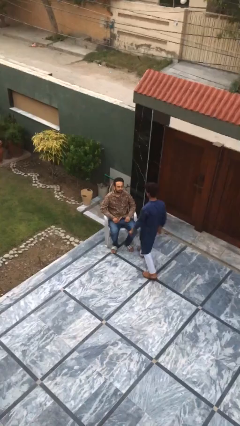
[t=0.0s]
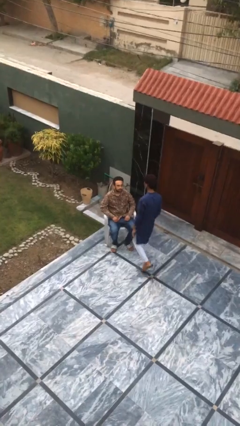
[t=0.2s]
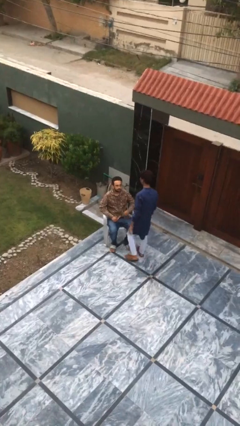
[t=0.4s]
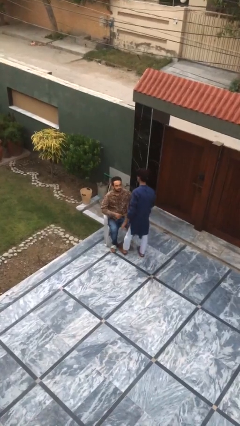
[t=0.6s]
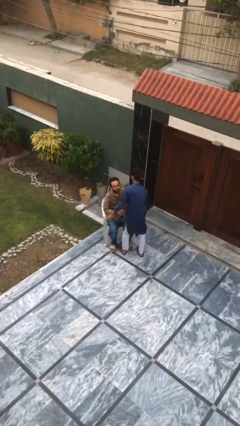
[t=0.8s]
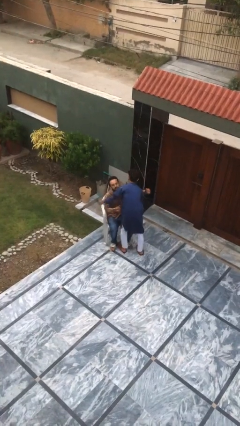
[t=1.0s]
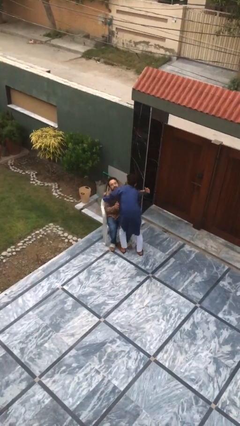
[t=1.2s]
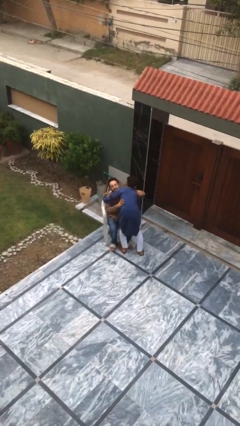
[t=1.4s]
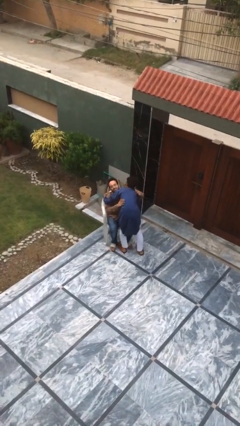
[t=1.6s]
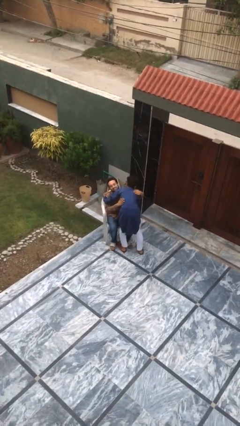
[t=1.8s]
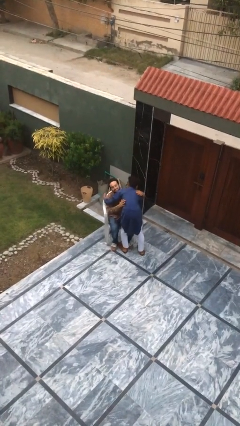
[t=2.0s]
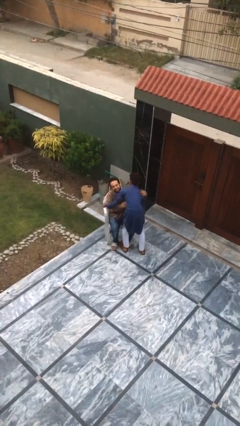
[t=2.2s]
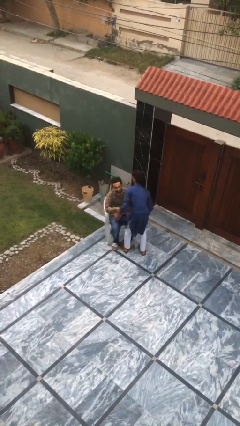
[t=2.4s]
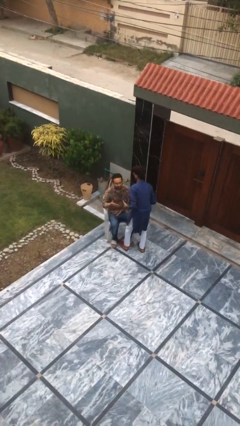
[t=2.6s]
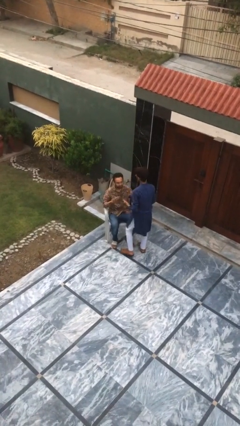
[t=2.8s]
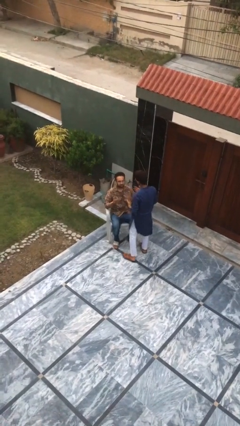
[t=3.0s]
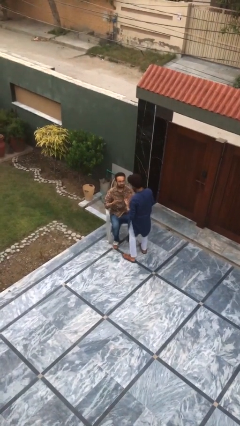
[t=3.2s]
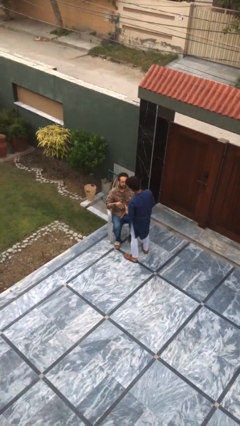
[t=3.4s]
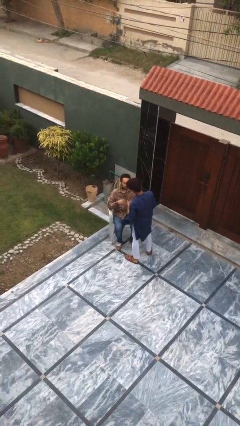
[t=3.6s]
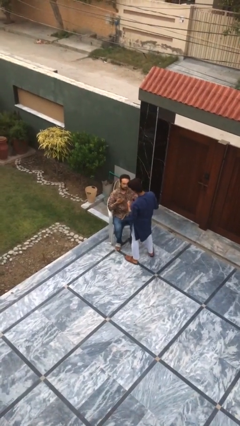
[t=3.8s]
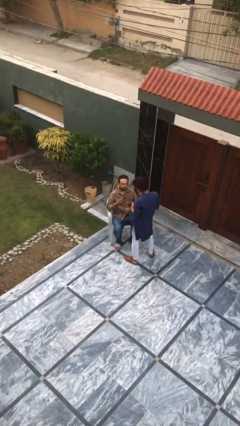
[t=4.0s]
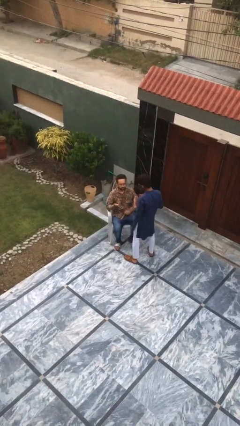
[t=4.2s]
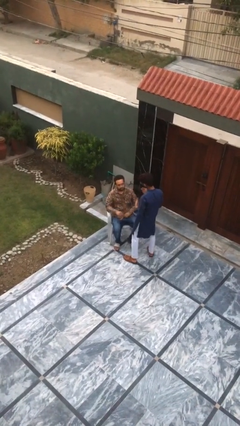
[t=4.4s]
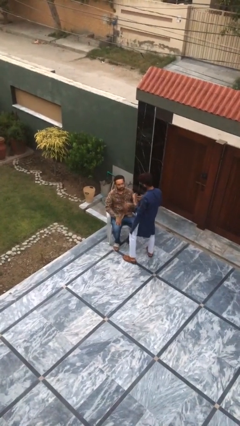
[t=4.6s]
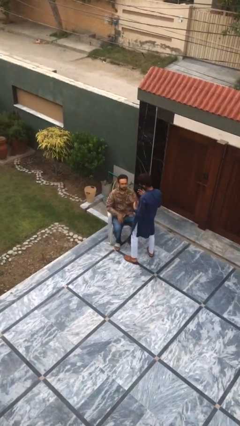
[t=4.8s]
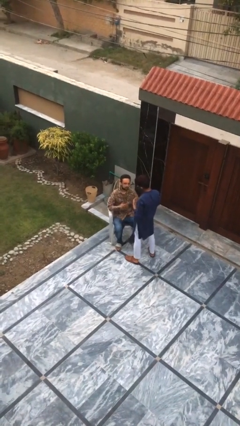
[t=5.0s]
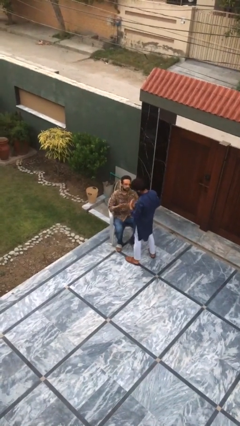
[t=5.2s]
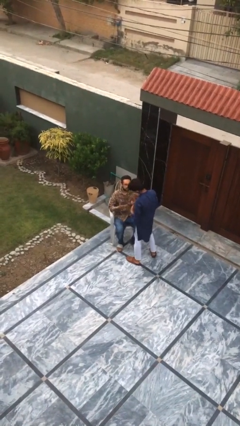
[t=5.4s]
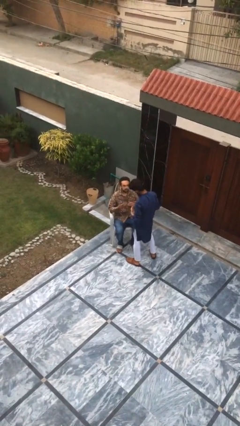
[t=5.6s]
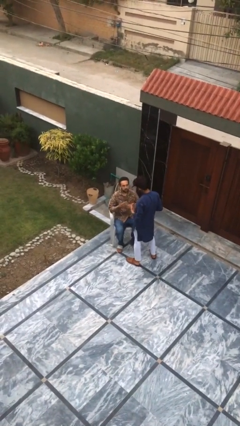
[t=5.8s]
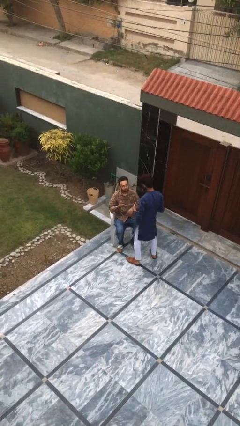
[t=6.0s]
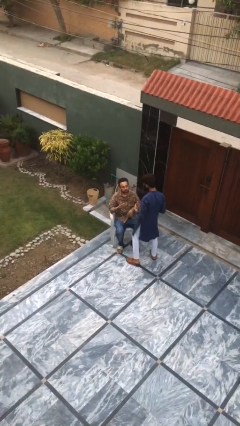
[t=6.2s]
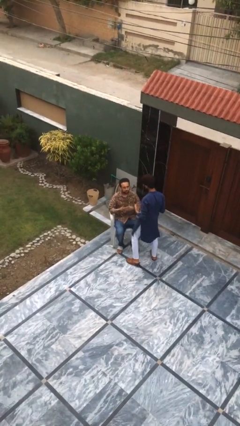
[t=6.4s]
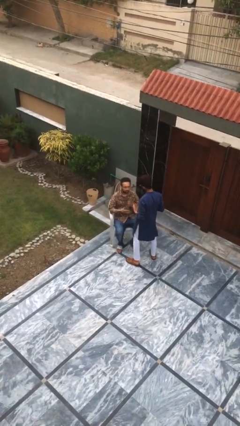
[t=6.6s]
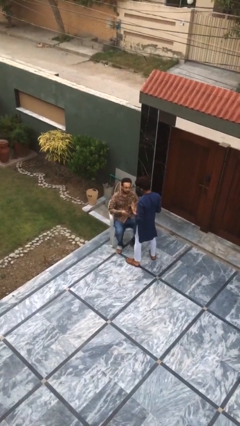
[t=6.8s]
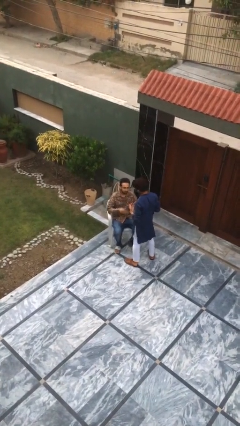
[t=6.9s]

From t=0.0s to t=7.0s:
person embraces person

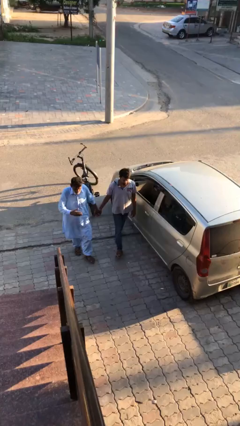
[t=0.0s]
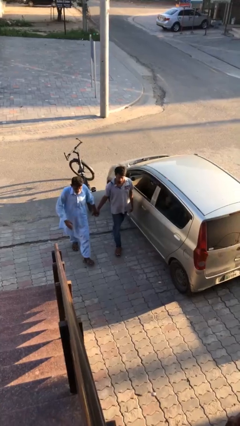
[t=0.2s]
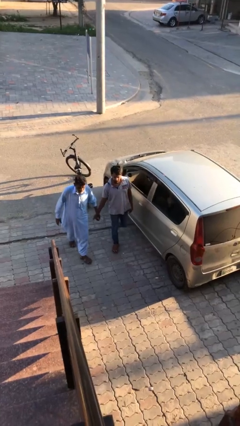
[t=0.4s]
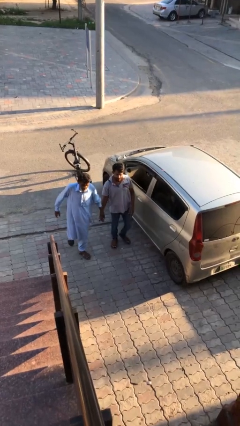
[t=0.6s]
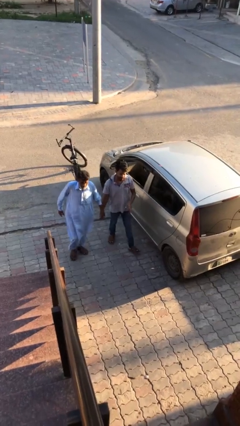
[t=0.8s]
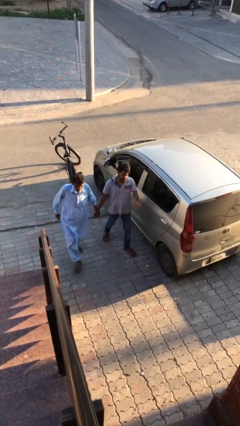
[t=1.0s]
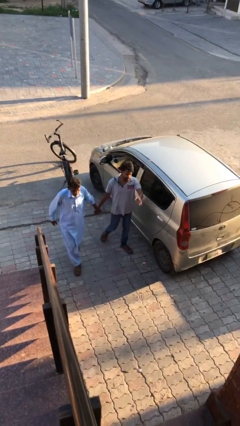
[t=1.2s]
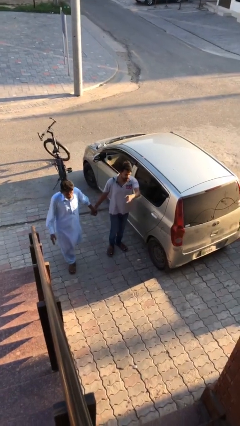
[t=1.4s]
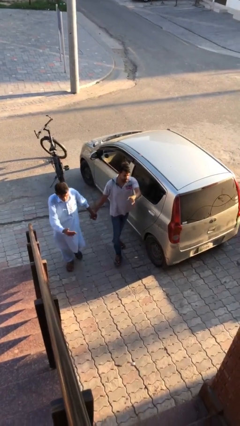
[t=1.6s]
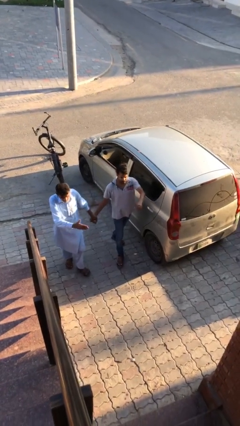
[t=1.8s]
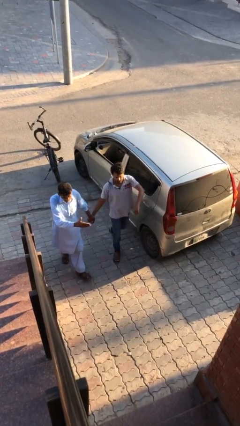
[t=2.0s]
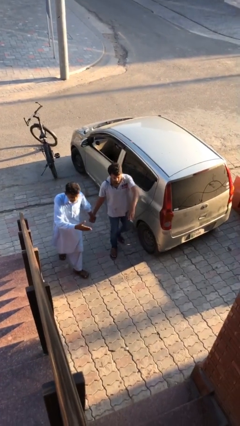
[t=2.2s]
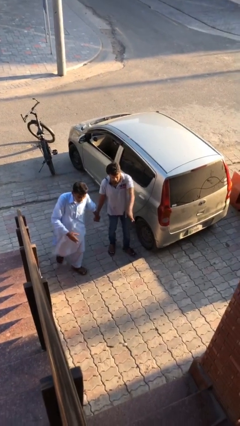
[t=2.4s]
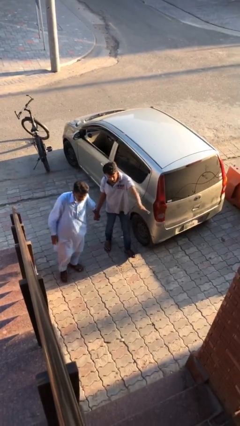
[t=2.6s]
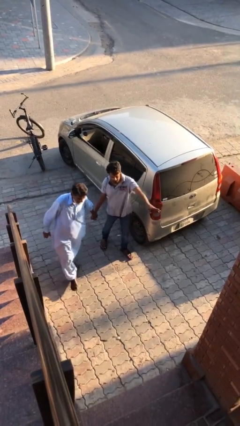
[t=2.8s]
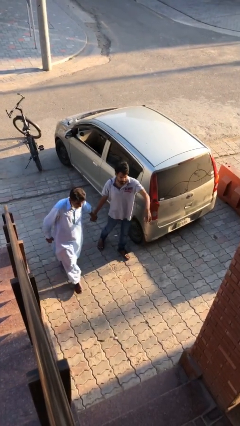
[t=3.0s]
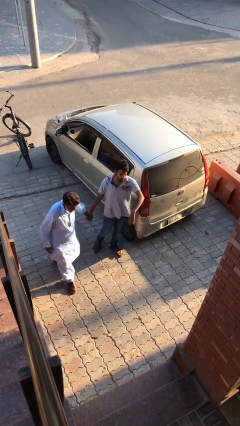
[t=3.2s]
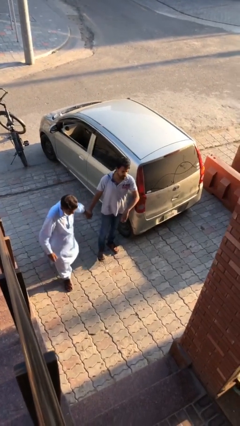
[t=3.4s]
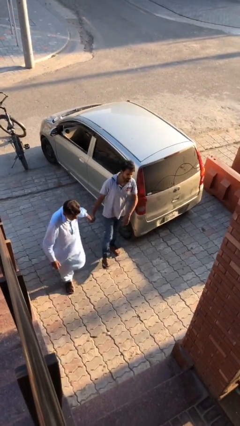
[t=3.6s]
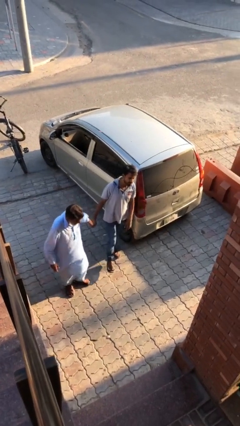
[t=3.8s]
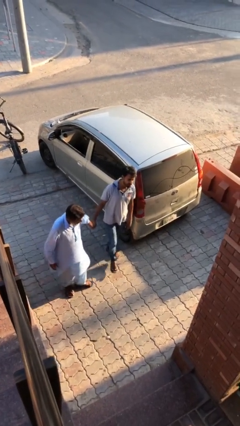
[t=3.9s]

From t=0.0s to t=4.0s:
person holds hand

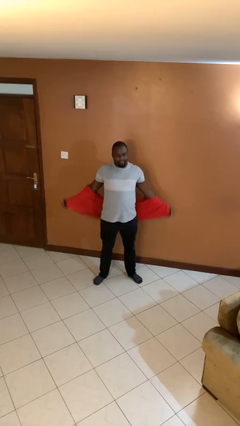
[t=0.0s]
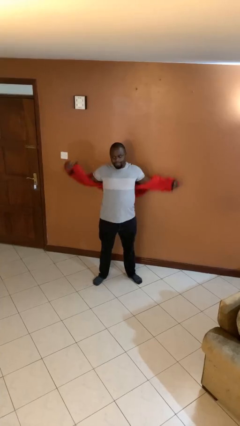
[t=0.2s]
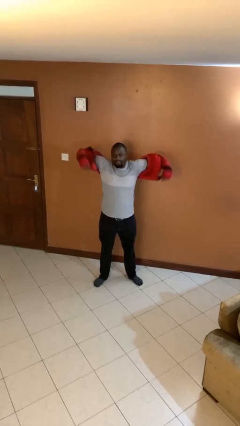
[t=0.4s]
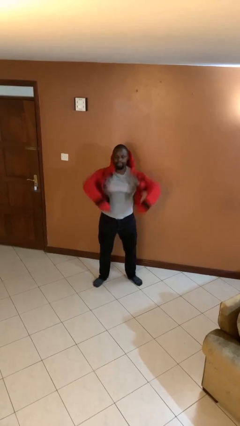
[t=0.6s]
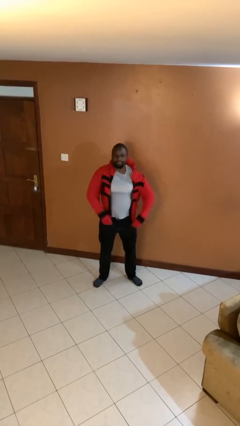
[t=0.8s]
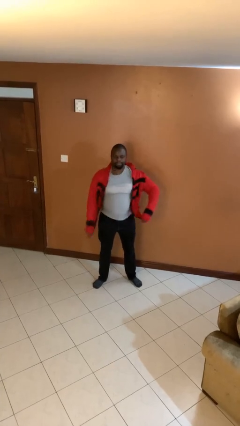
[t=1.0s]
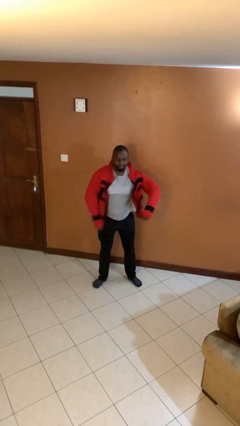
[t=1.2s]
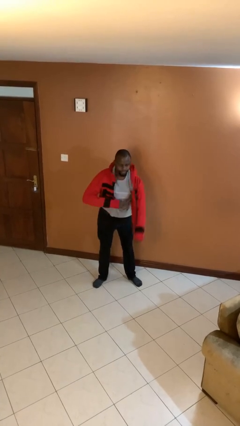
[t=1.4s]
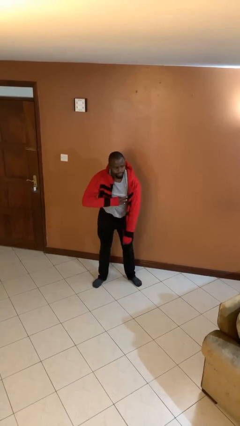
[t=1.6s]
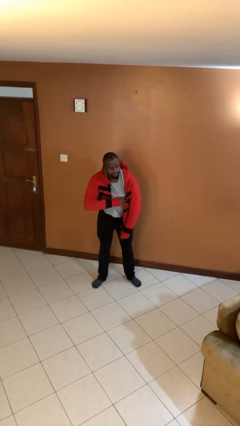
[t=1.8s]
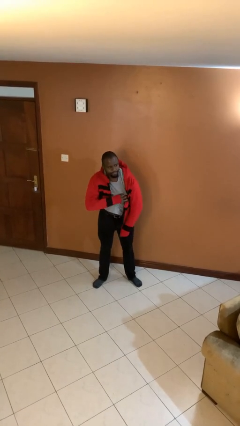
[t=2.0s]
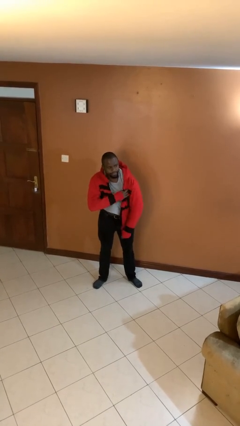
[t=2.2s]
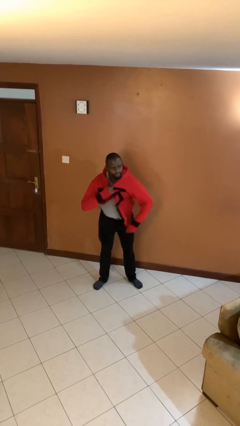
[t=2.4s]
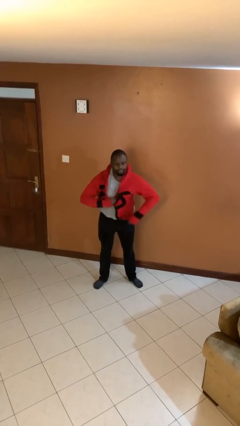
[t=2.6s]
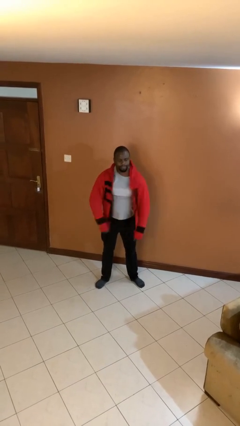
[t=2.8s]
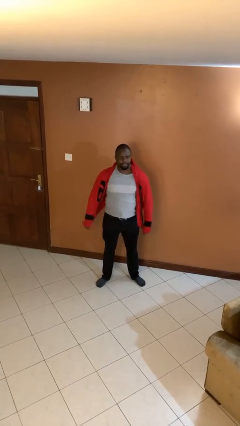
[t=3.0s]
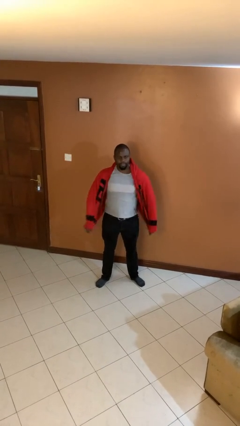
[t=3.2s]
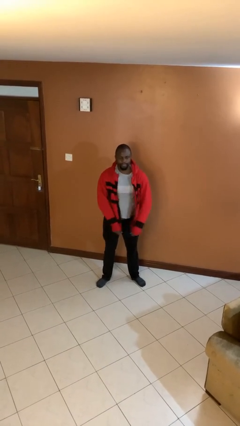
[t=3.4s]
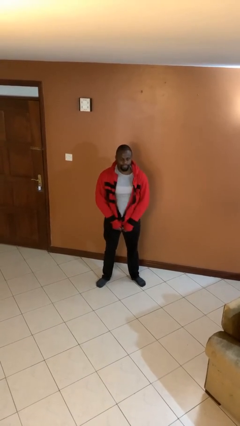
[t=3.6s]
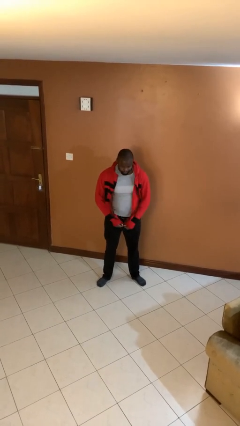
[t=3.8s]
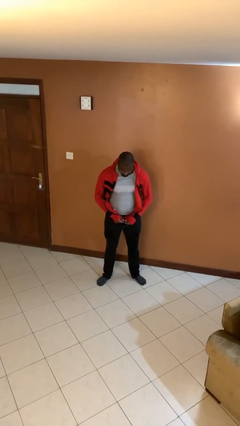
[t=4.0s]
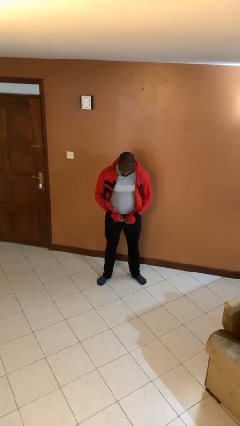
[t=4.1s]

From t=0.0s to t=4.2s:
person puts on jacket

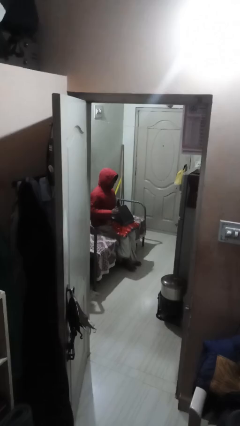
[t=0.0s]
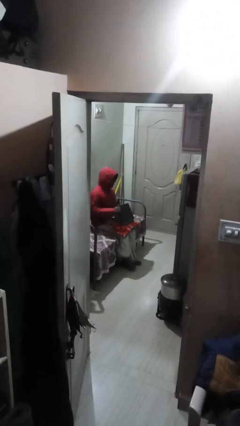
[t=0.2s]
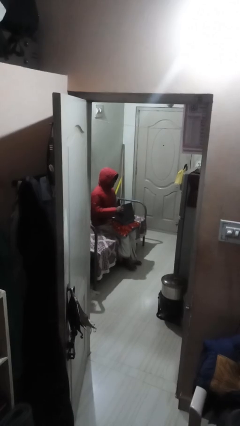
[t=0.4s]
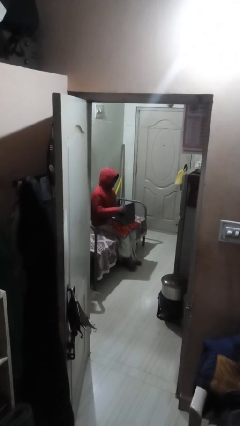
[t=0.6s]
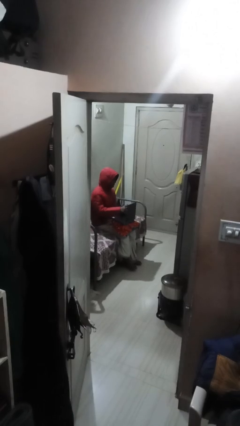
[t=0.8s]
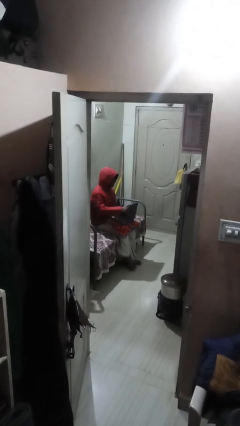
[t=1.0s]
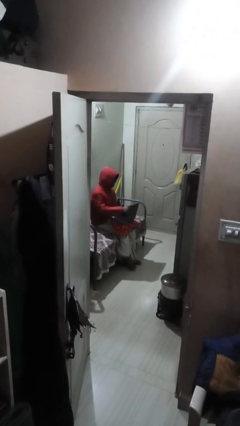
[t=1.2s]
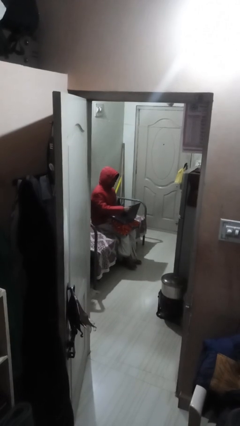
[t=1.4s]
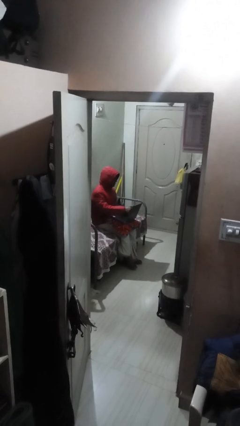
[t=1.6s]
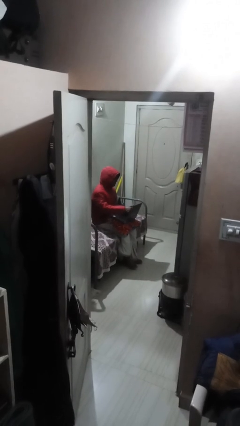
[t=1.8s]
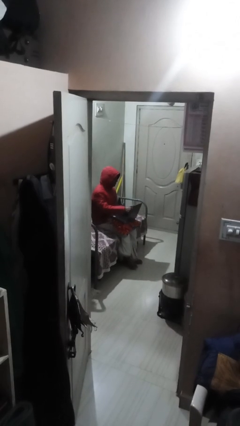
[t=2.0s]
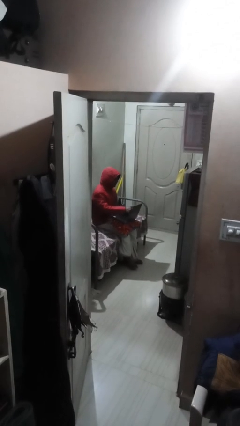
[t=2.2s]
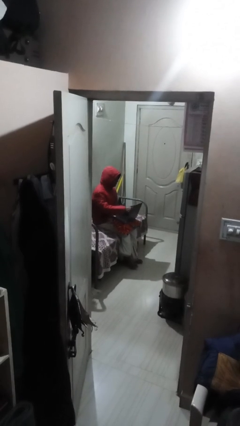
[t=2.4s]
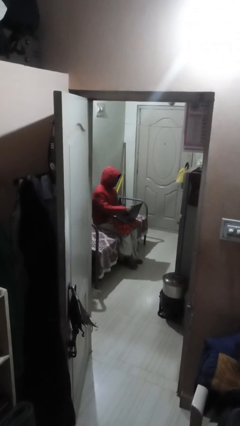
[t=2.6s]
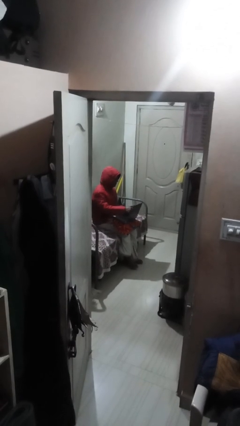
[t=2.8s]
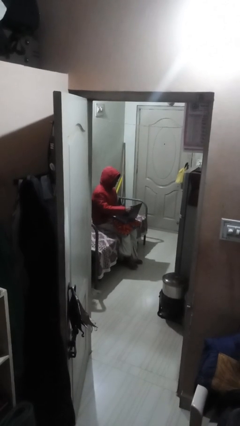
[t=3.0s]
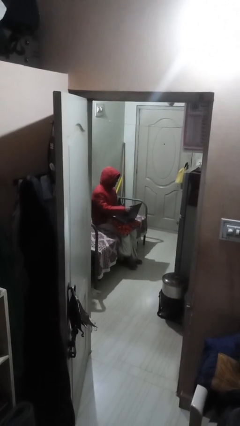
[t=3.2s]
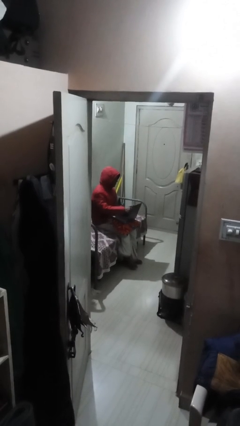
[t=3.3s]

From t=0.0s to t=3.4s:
person interacts with laptop
